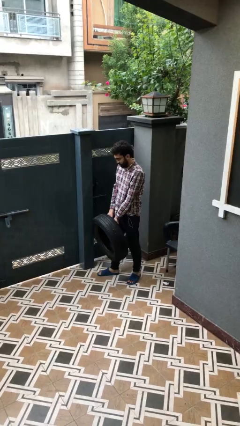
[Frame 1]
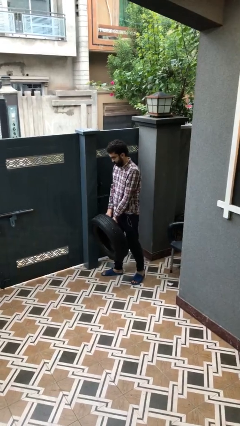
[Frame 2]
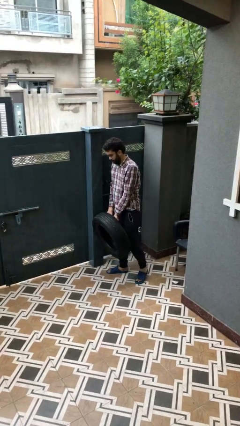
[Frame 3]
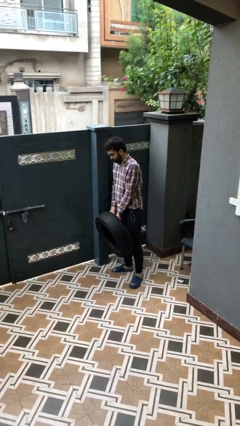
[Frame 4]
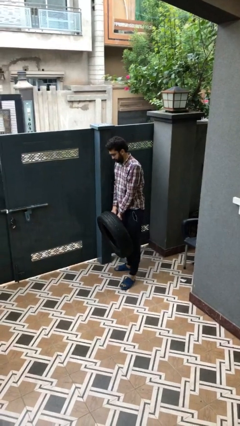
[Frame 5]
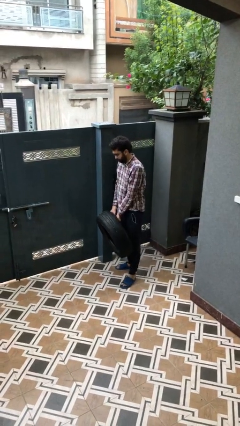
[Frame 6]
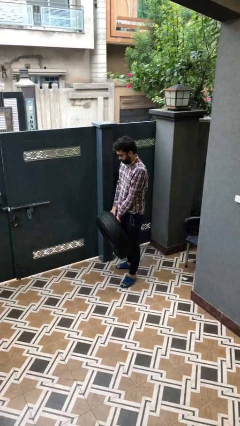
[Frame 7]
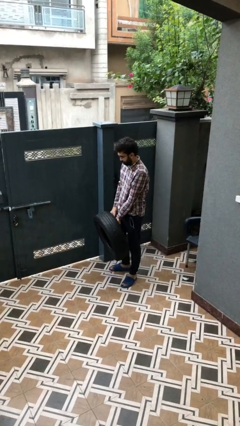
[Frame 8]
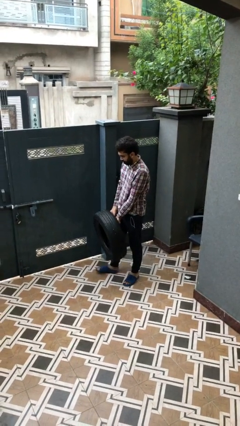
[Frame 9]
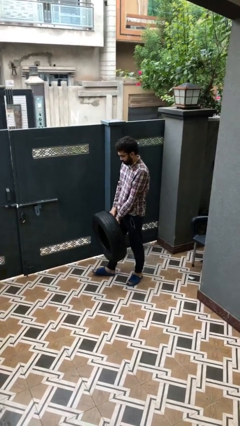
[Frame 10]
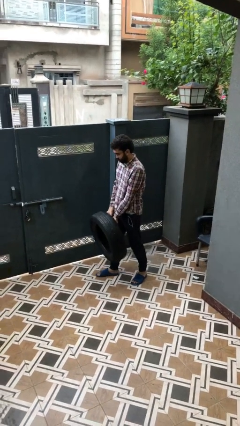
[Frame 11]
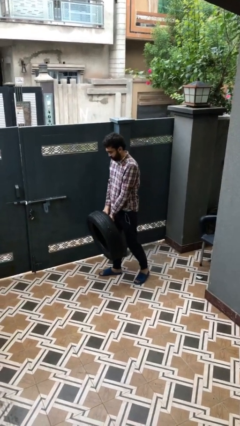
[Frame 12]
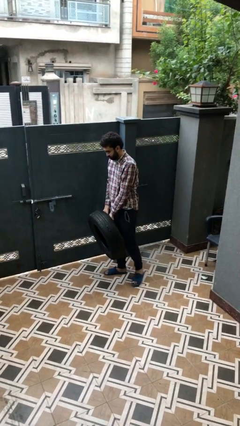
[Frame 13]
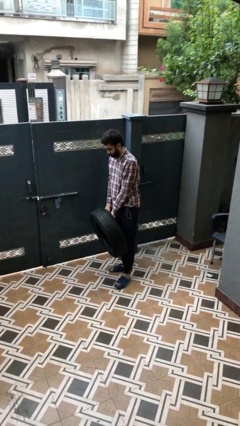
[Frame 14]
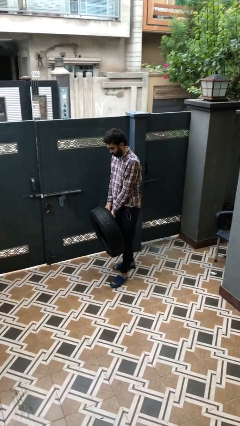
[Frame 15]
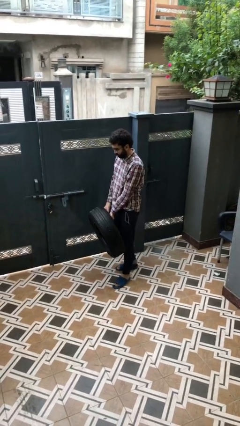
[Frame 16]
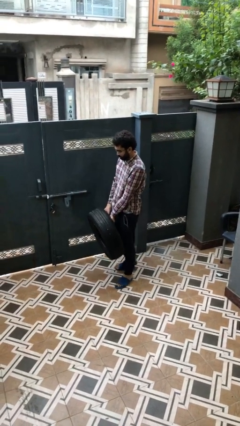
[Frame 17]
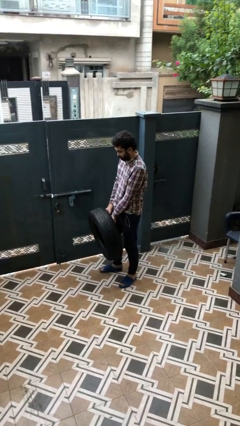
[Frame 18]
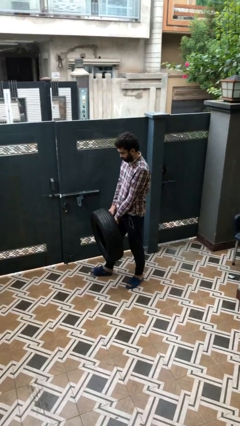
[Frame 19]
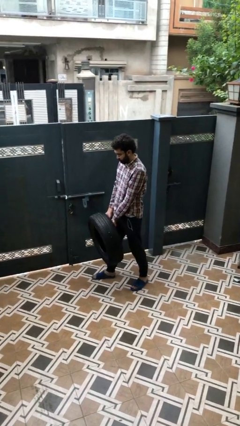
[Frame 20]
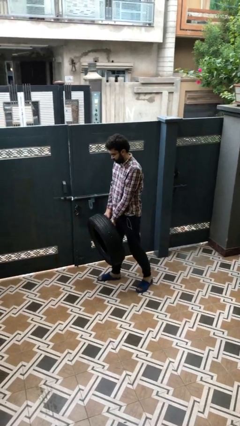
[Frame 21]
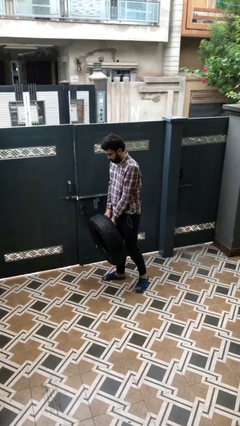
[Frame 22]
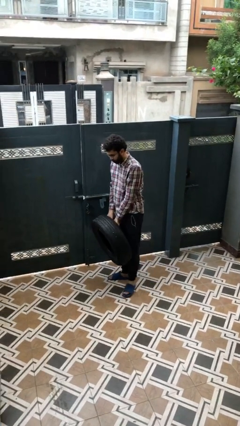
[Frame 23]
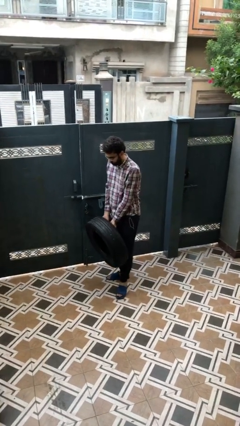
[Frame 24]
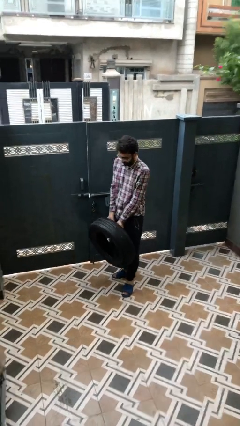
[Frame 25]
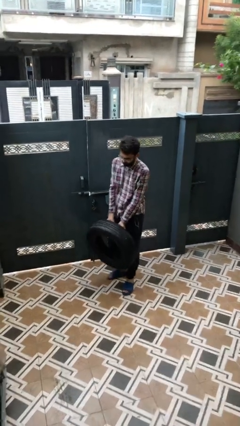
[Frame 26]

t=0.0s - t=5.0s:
person carries heavy object

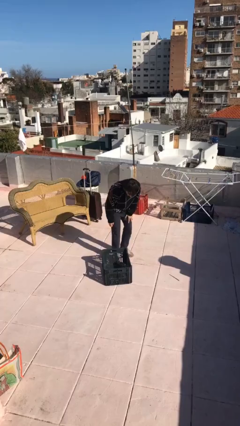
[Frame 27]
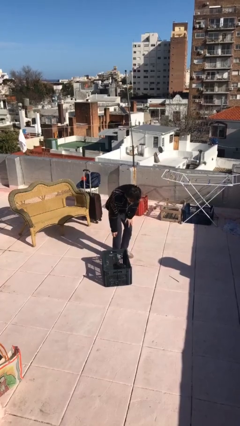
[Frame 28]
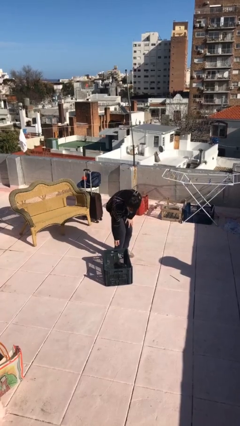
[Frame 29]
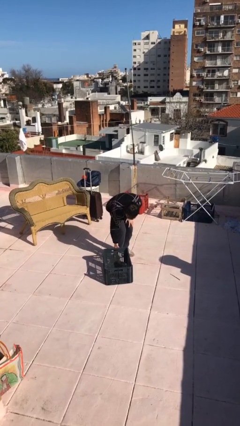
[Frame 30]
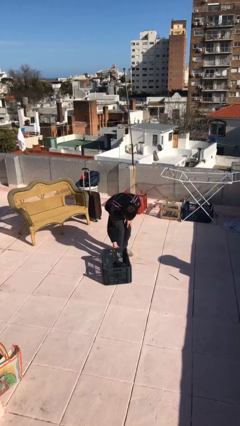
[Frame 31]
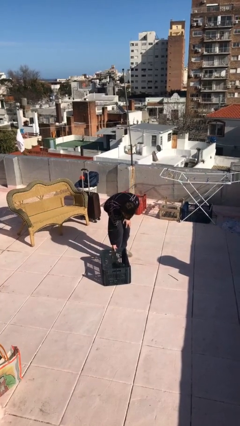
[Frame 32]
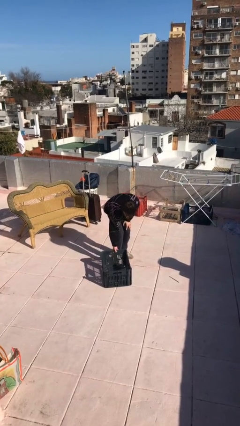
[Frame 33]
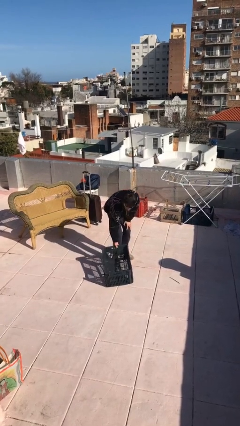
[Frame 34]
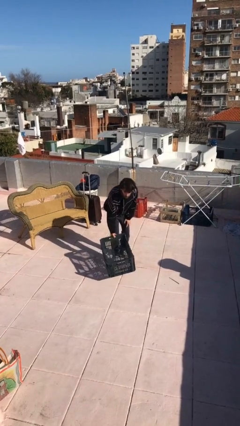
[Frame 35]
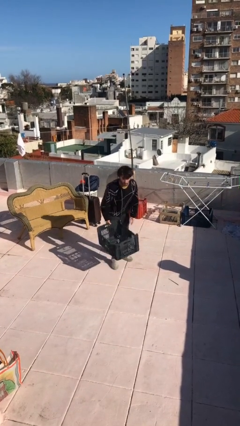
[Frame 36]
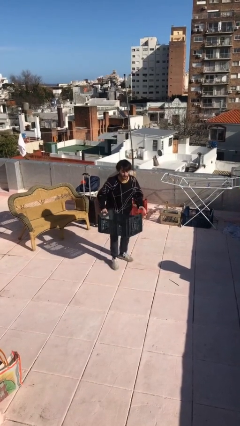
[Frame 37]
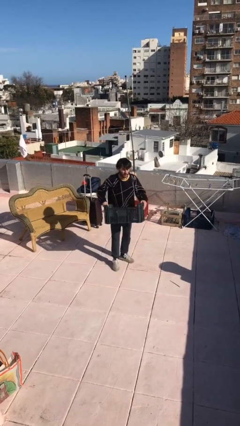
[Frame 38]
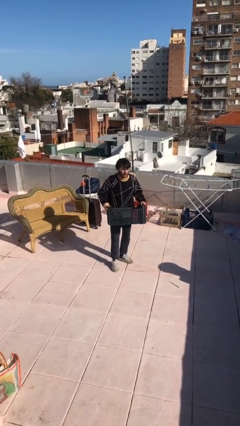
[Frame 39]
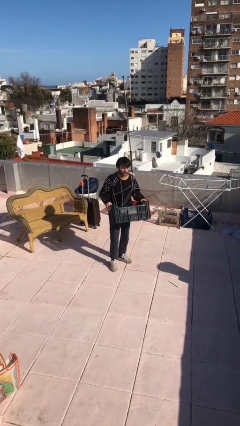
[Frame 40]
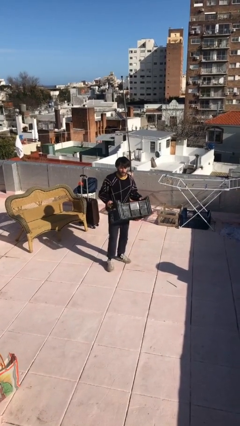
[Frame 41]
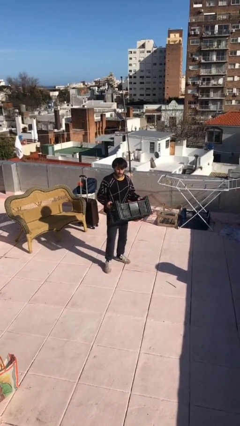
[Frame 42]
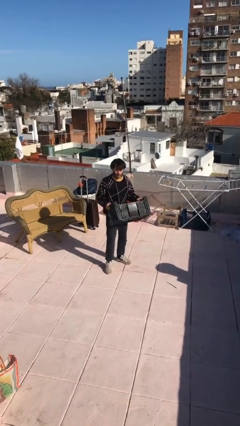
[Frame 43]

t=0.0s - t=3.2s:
person picks up object from floor

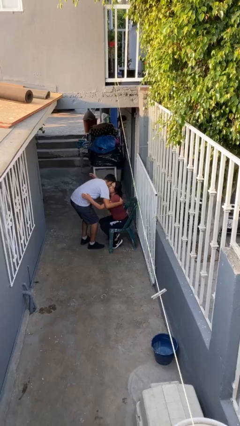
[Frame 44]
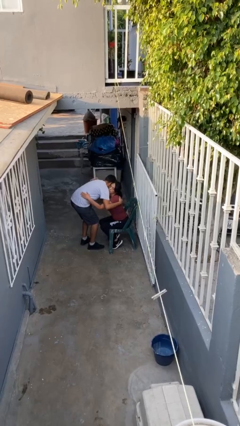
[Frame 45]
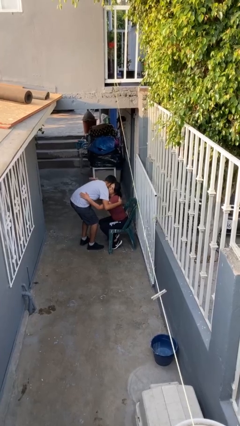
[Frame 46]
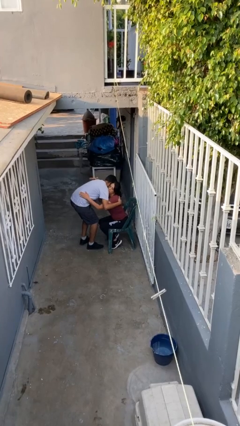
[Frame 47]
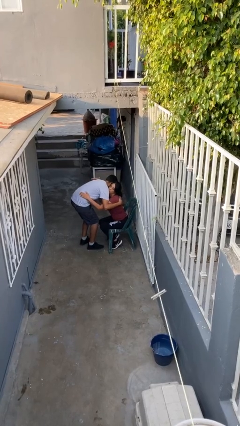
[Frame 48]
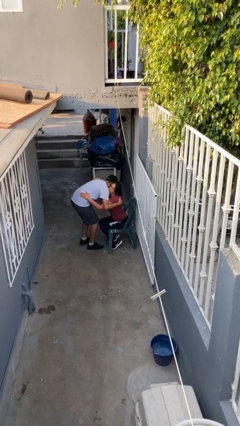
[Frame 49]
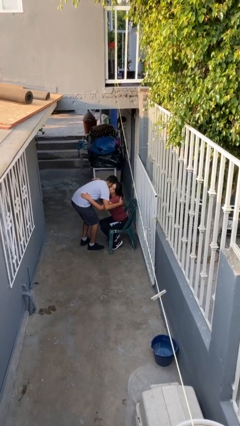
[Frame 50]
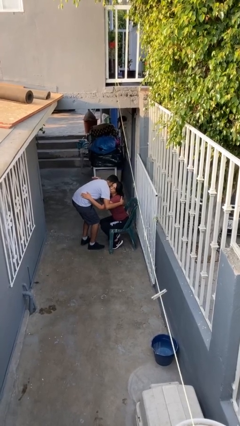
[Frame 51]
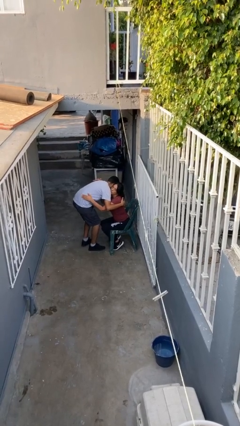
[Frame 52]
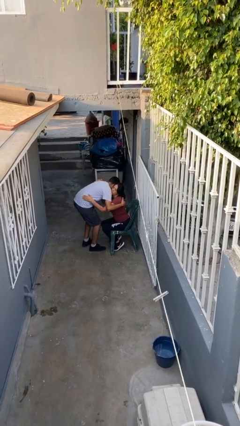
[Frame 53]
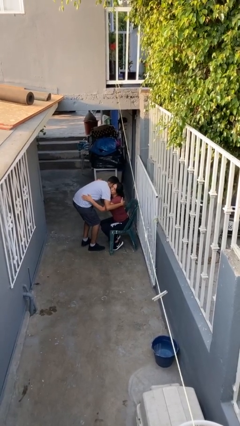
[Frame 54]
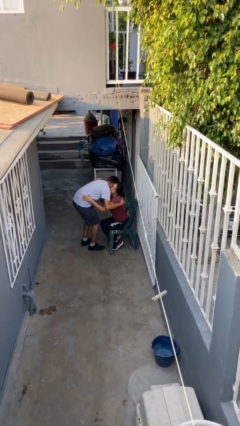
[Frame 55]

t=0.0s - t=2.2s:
person embraces person

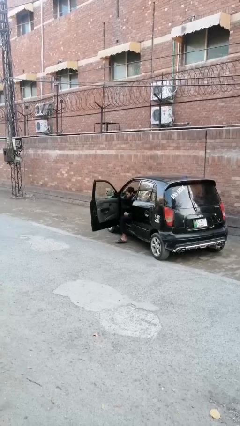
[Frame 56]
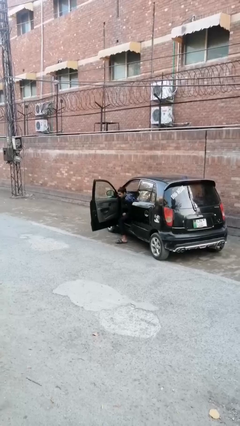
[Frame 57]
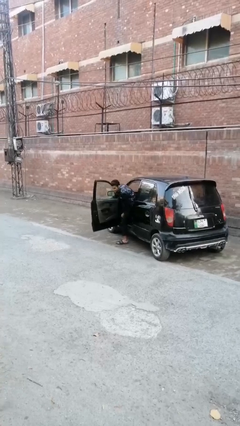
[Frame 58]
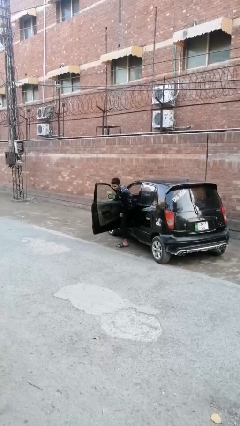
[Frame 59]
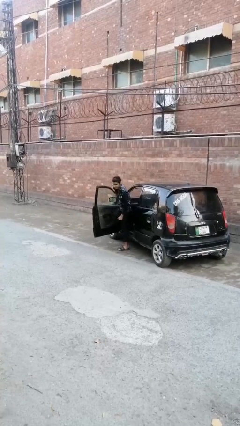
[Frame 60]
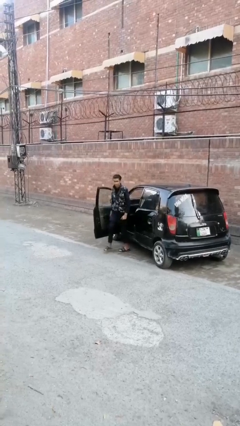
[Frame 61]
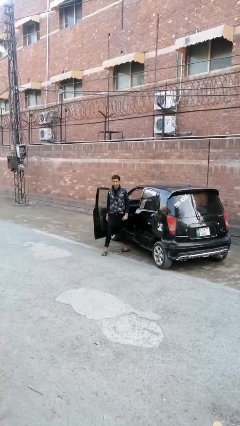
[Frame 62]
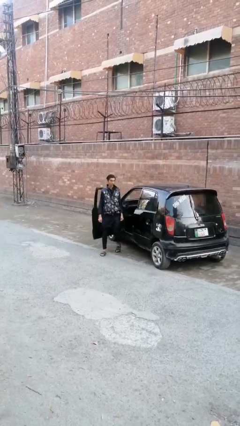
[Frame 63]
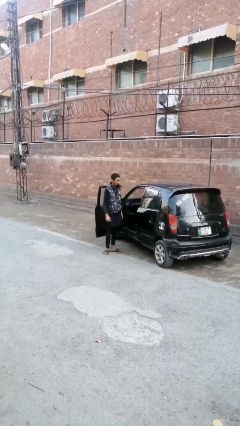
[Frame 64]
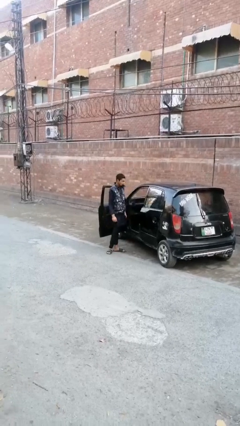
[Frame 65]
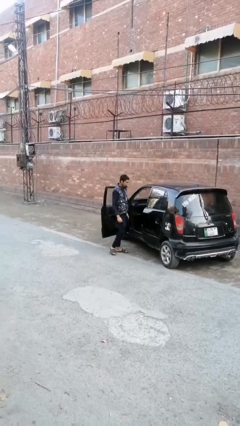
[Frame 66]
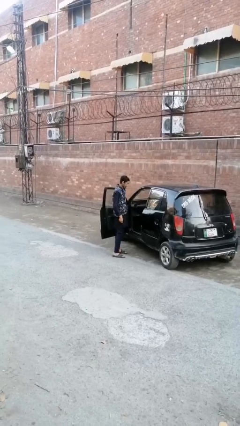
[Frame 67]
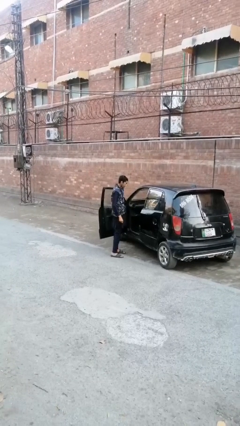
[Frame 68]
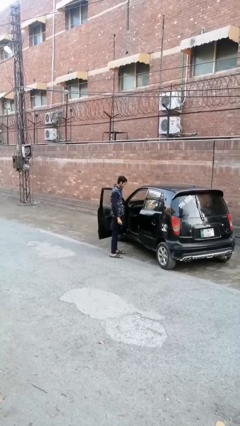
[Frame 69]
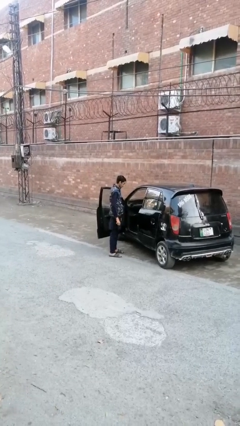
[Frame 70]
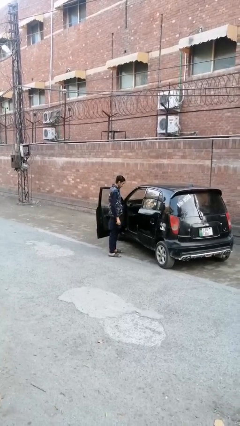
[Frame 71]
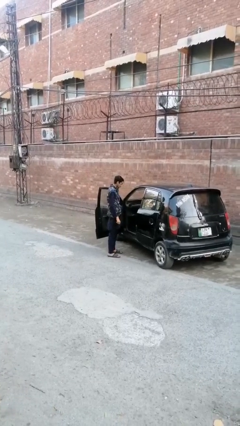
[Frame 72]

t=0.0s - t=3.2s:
person exits car

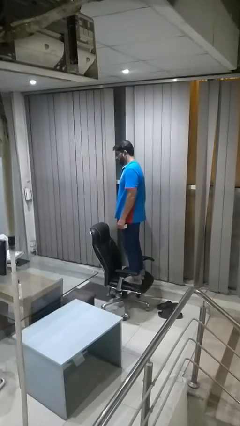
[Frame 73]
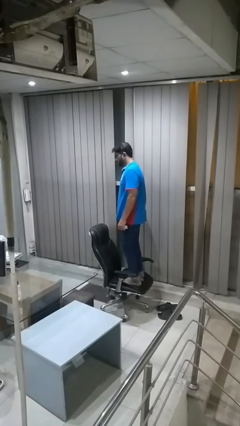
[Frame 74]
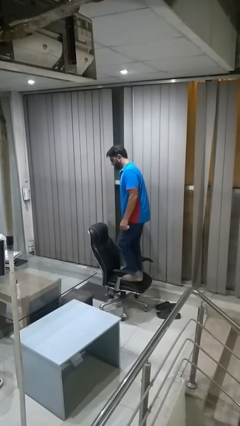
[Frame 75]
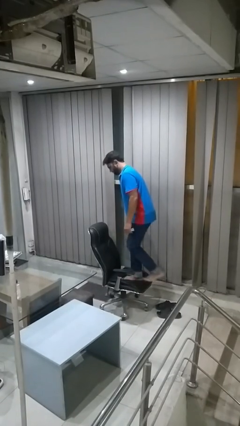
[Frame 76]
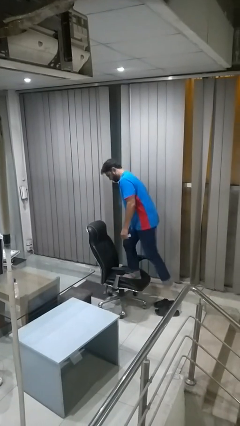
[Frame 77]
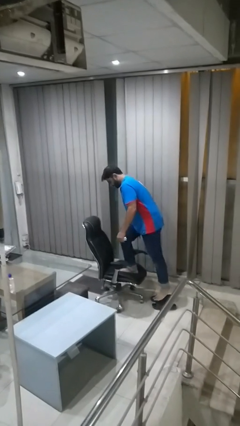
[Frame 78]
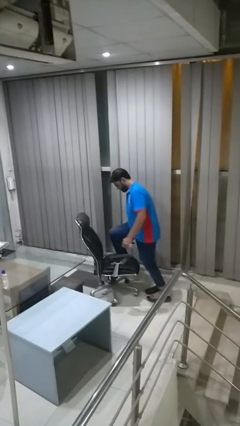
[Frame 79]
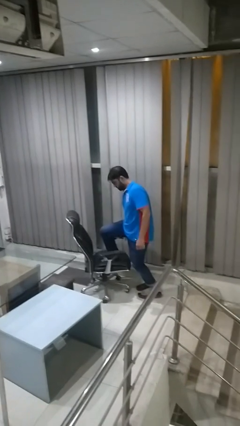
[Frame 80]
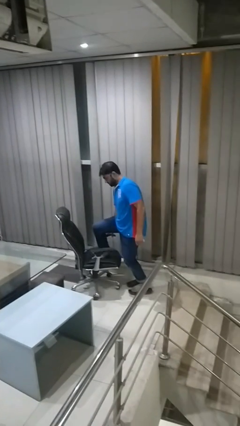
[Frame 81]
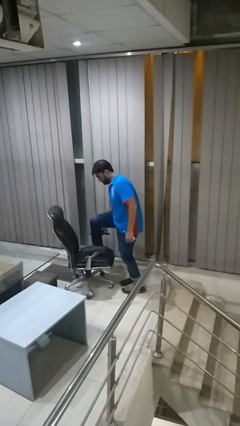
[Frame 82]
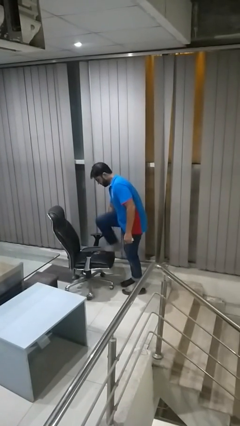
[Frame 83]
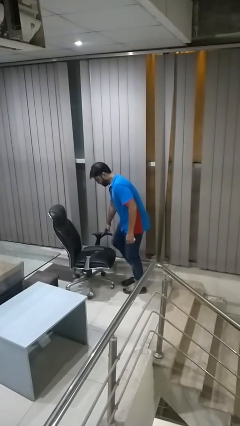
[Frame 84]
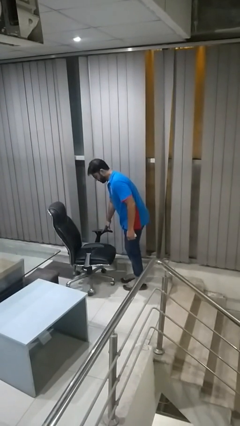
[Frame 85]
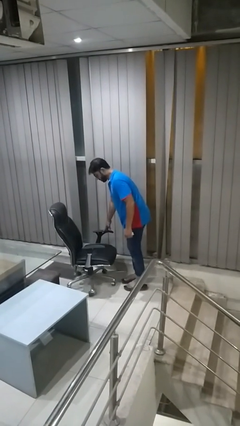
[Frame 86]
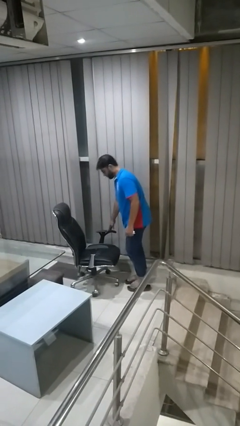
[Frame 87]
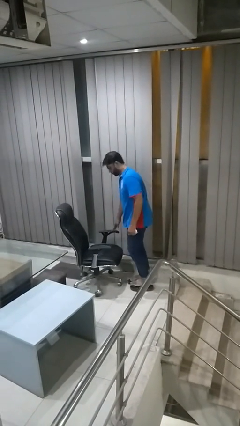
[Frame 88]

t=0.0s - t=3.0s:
person climbs off chair

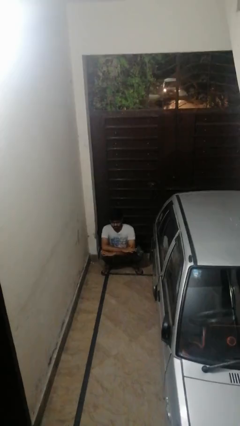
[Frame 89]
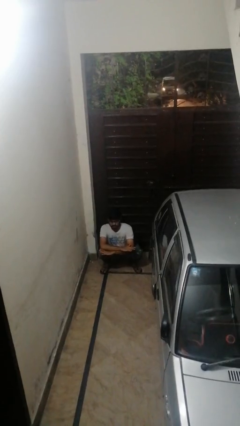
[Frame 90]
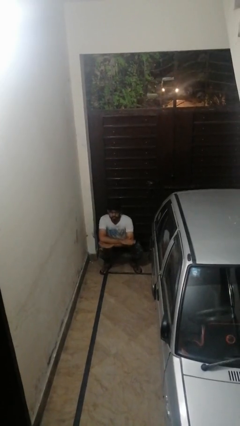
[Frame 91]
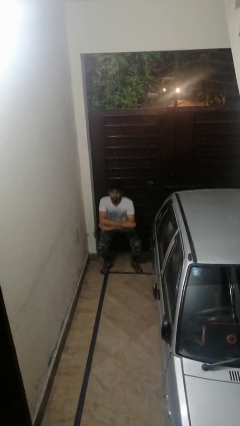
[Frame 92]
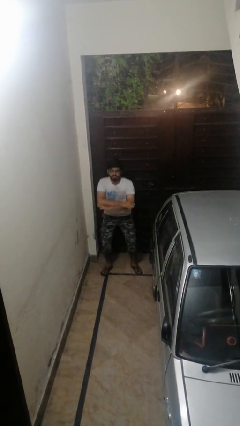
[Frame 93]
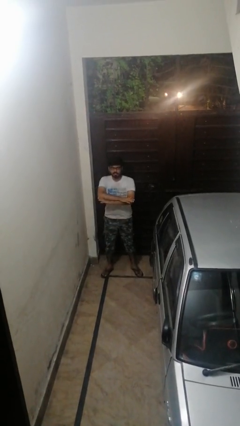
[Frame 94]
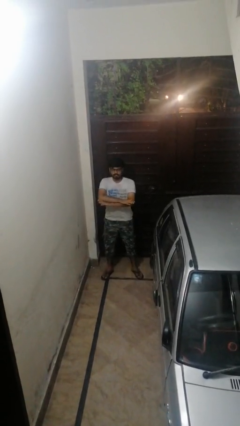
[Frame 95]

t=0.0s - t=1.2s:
person stands up
